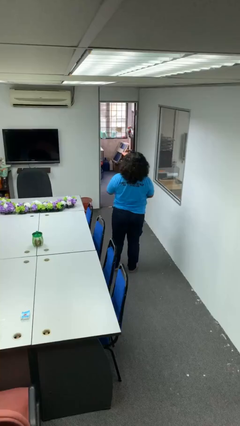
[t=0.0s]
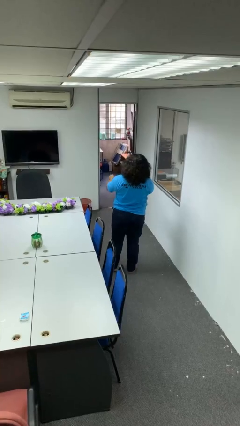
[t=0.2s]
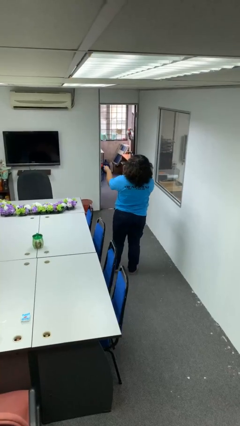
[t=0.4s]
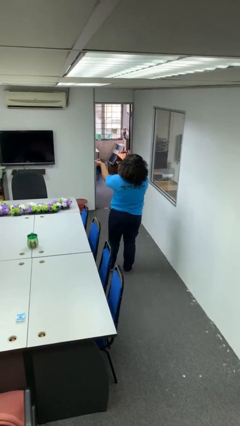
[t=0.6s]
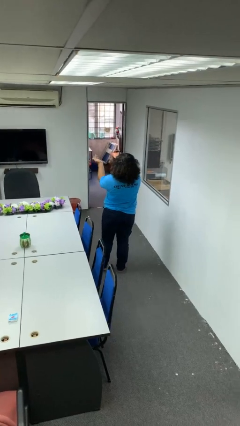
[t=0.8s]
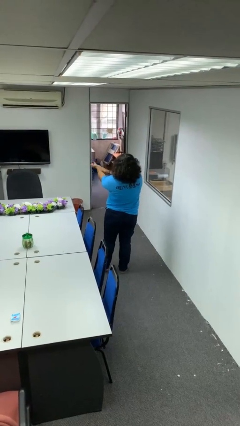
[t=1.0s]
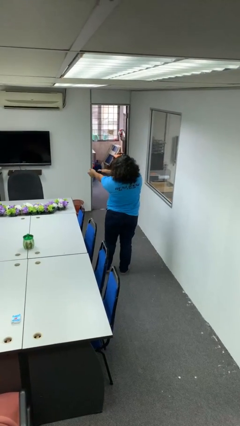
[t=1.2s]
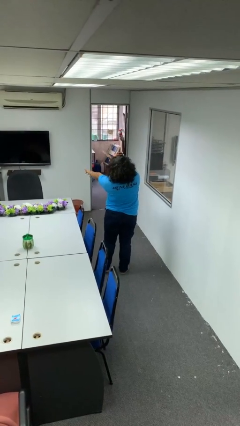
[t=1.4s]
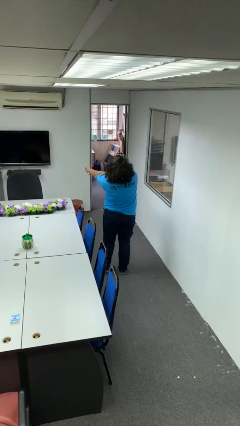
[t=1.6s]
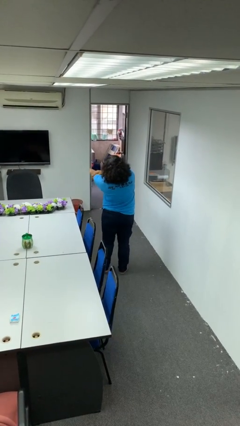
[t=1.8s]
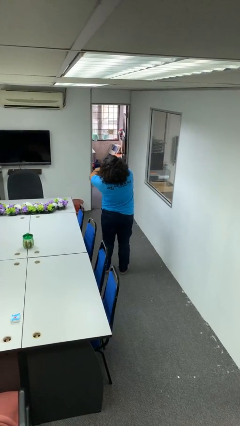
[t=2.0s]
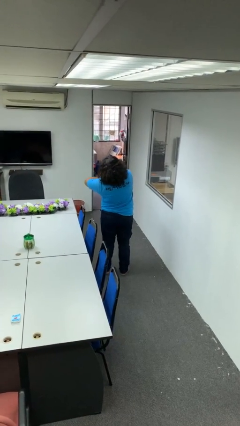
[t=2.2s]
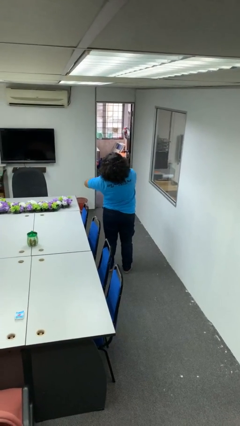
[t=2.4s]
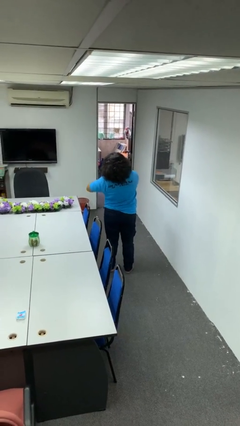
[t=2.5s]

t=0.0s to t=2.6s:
person swats bug

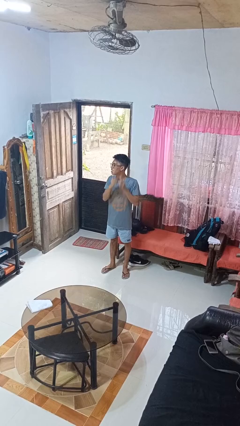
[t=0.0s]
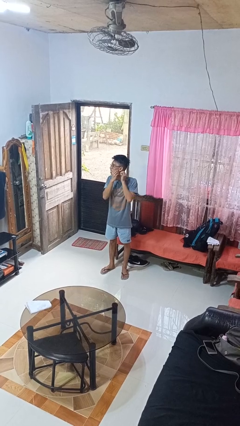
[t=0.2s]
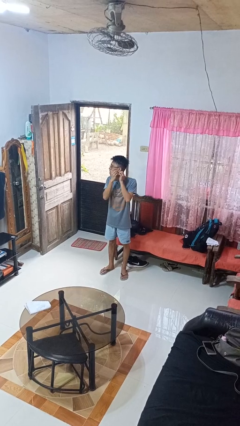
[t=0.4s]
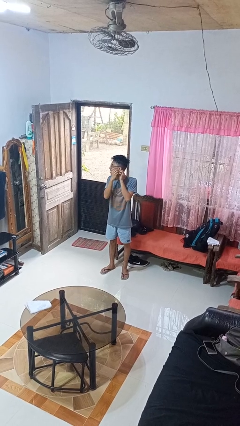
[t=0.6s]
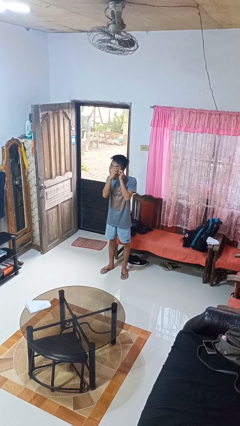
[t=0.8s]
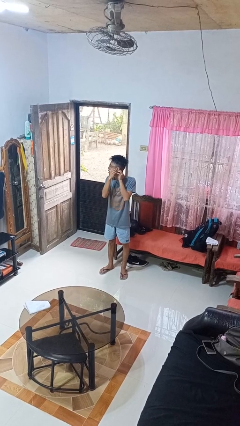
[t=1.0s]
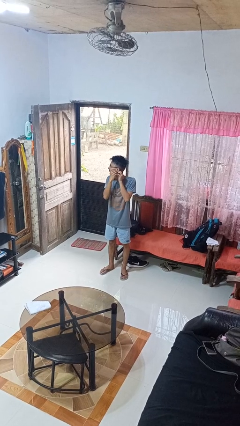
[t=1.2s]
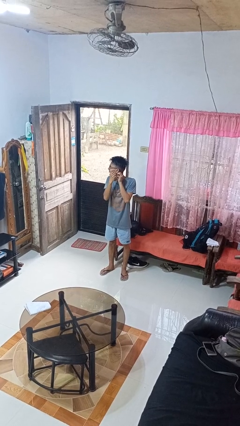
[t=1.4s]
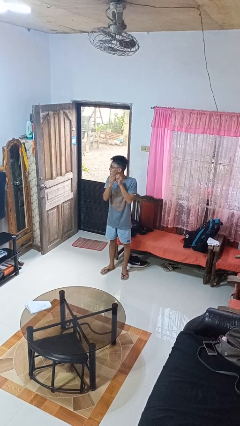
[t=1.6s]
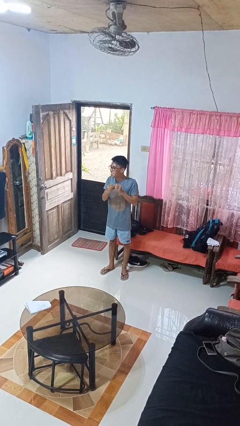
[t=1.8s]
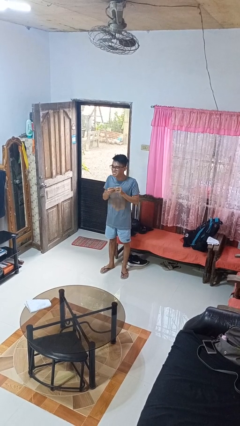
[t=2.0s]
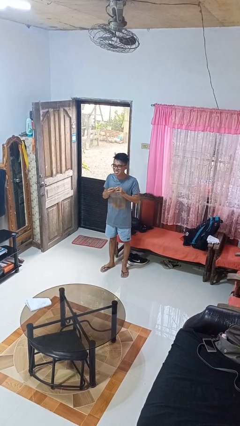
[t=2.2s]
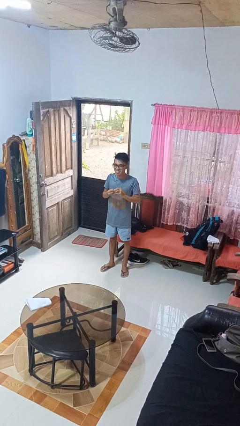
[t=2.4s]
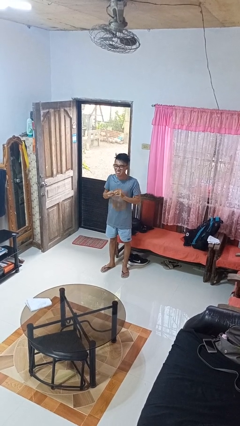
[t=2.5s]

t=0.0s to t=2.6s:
person takes off earrings

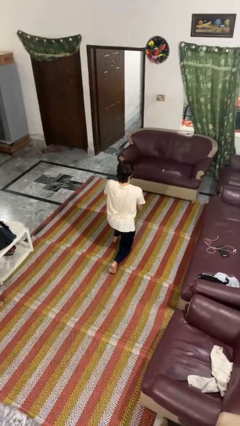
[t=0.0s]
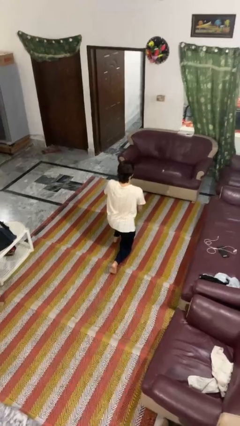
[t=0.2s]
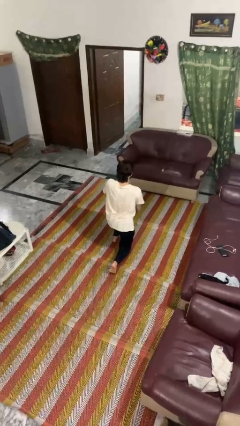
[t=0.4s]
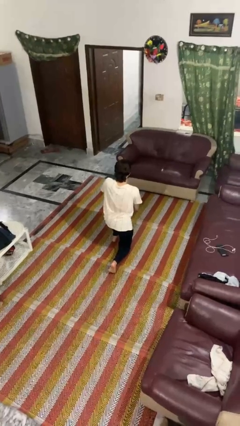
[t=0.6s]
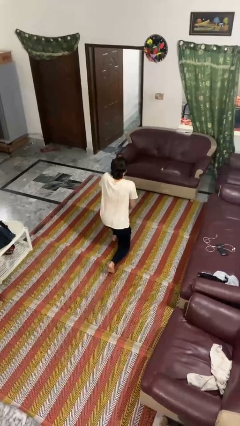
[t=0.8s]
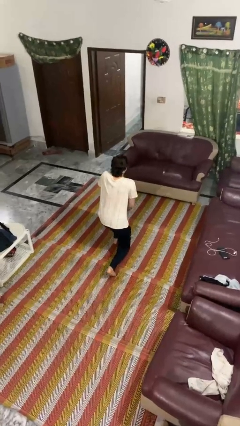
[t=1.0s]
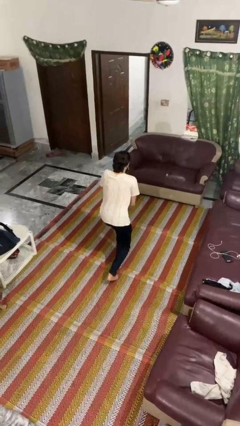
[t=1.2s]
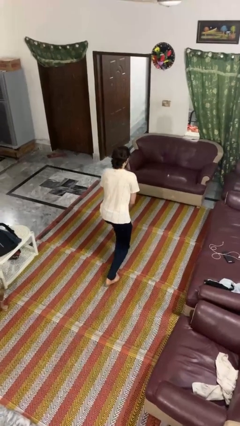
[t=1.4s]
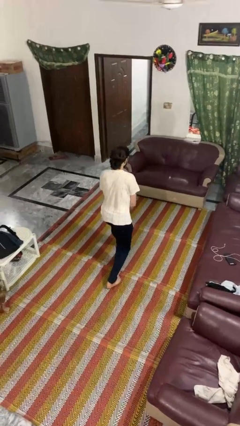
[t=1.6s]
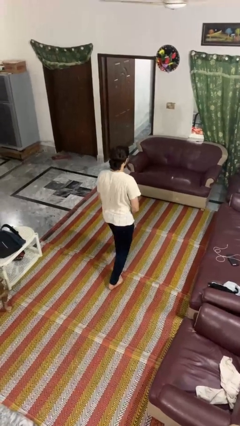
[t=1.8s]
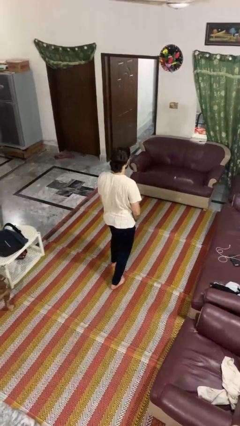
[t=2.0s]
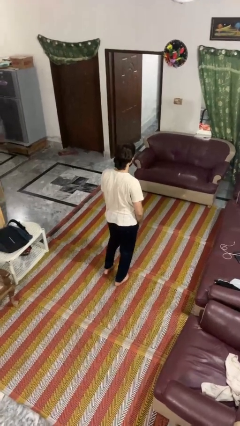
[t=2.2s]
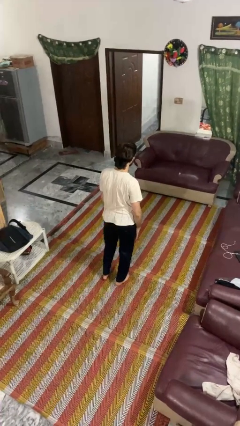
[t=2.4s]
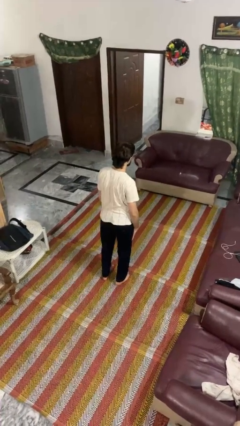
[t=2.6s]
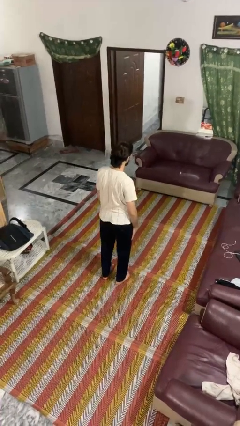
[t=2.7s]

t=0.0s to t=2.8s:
person stands up from floor

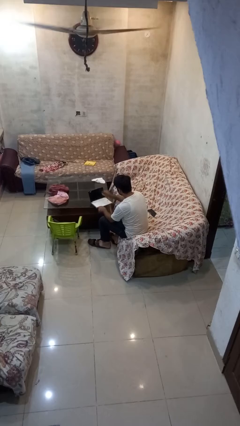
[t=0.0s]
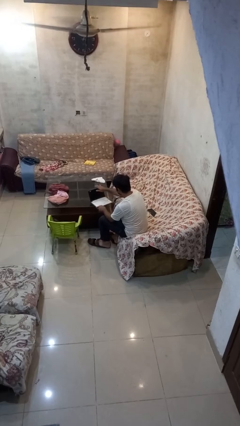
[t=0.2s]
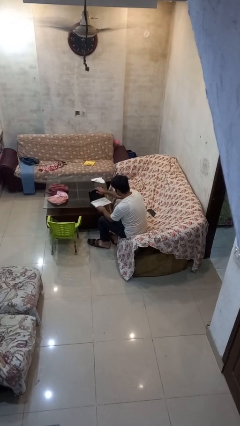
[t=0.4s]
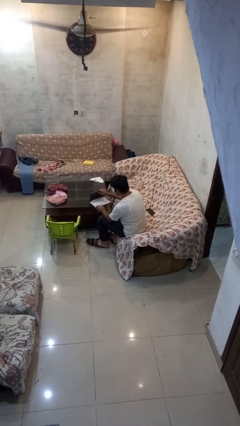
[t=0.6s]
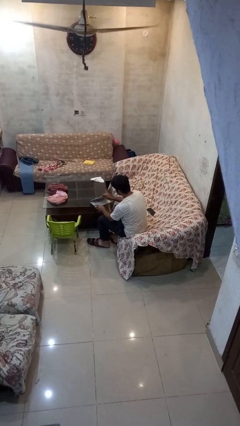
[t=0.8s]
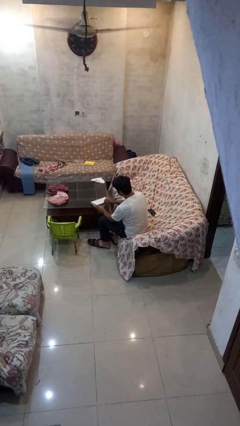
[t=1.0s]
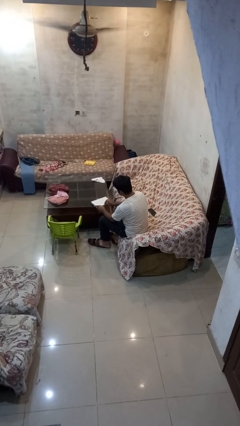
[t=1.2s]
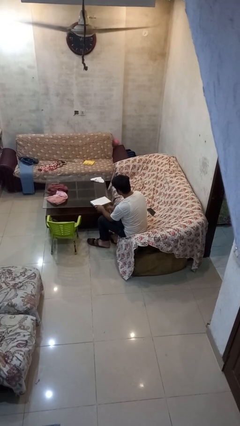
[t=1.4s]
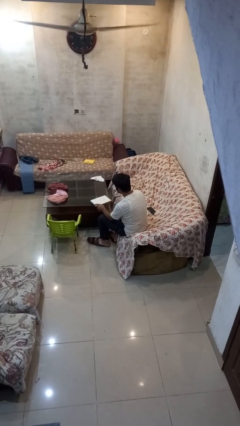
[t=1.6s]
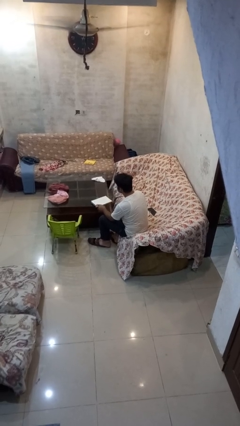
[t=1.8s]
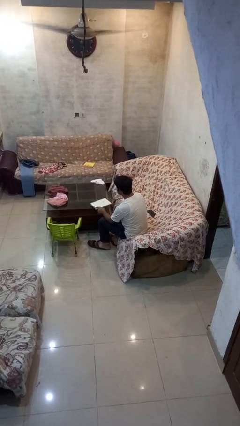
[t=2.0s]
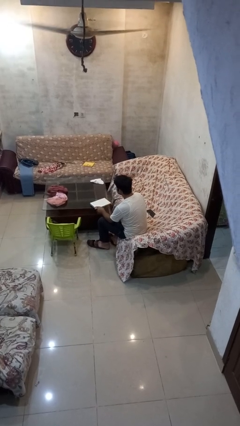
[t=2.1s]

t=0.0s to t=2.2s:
person closes laptop

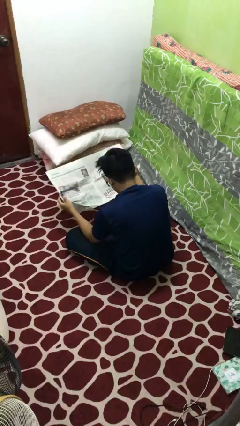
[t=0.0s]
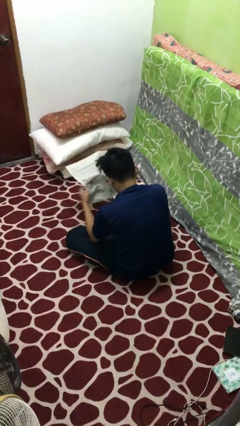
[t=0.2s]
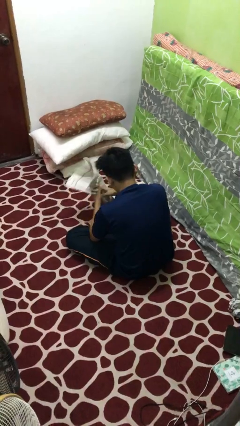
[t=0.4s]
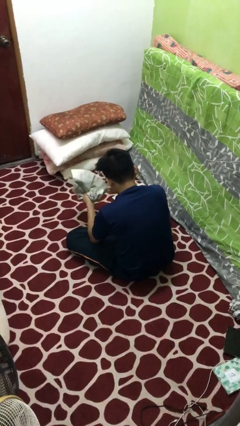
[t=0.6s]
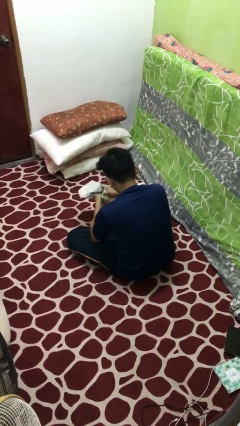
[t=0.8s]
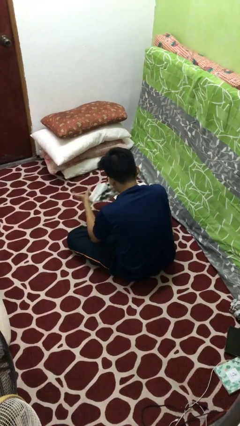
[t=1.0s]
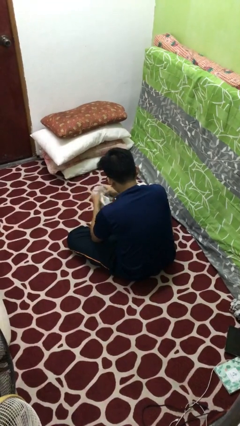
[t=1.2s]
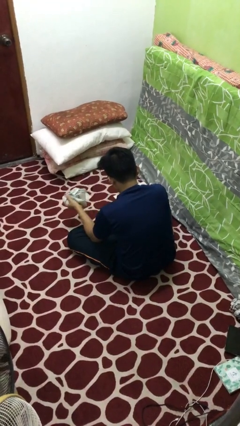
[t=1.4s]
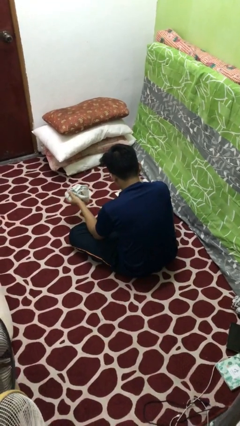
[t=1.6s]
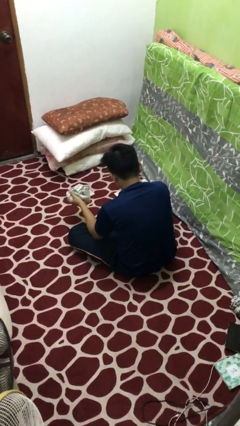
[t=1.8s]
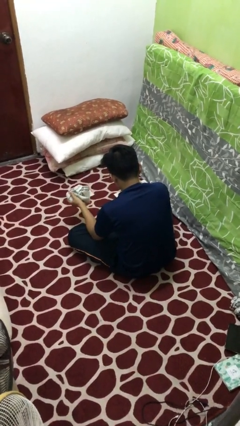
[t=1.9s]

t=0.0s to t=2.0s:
person crumples paper

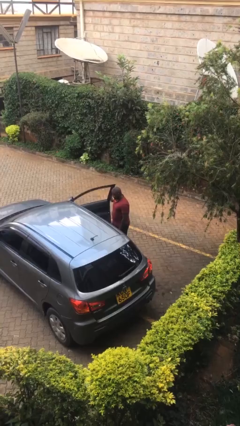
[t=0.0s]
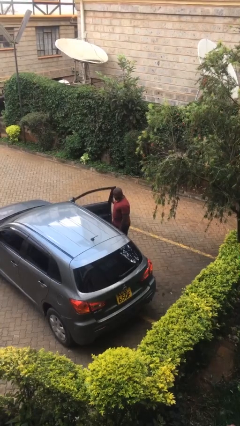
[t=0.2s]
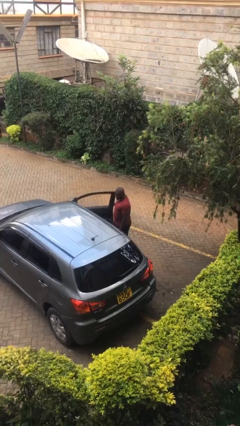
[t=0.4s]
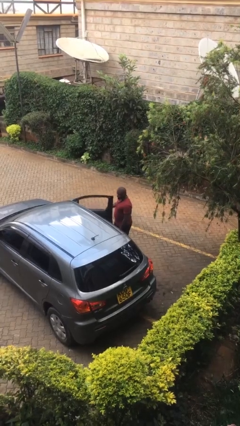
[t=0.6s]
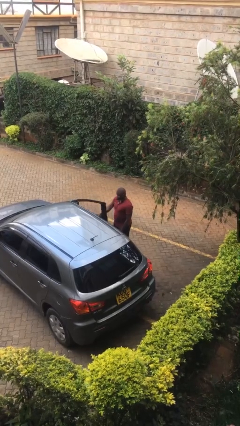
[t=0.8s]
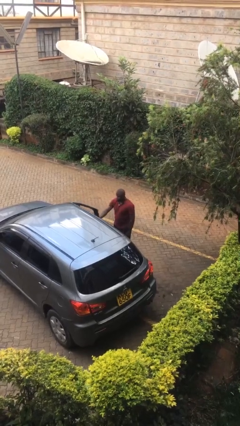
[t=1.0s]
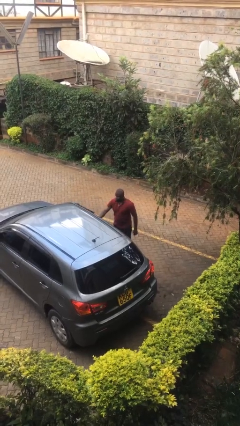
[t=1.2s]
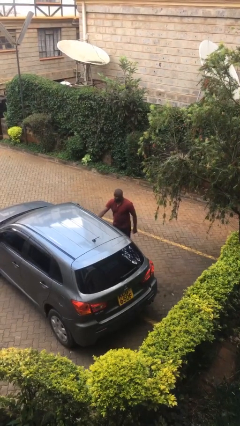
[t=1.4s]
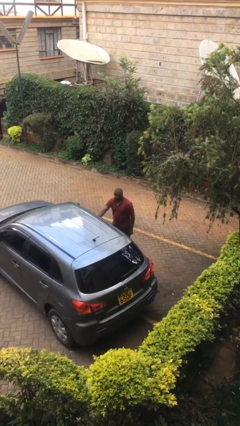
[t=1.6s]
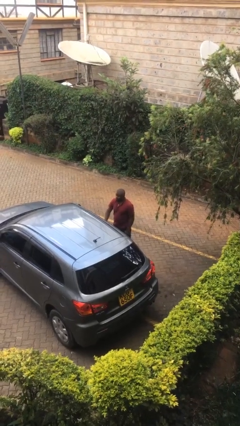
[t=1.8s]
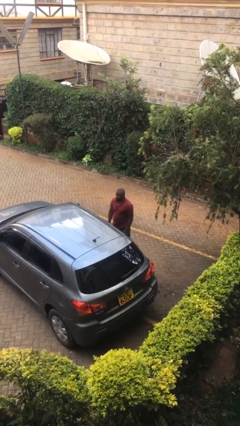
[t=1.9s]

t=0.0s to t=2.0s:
person closes car door

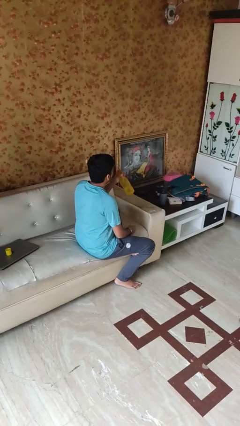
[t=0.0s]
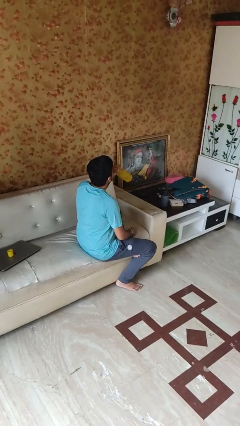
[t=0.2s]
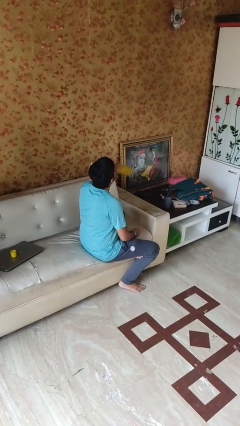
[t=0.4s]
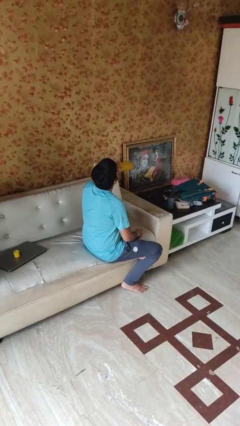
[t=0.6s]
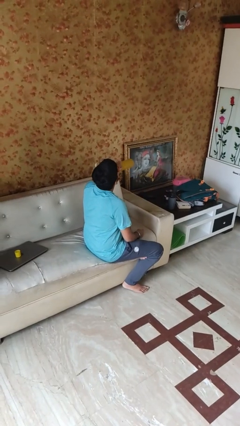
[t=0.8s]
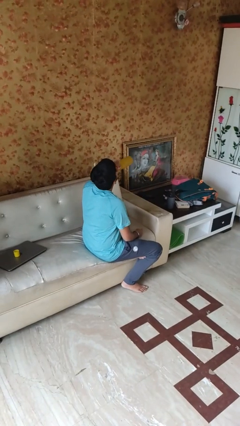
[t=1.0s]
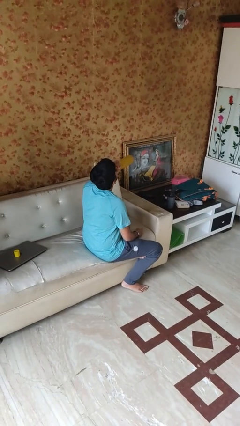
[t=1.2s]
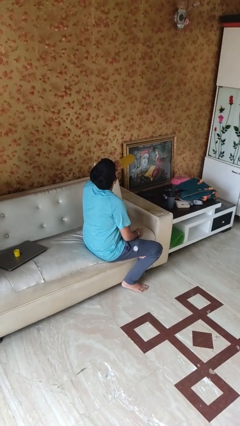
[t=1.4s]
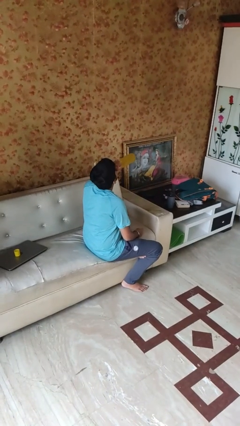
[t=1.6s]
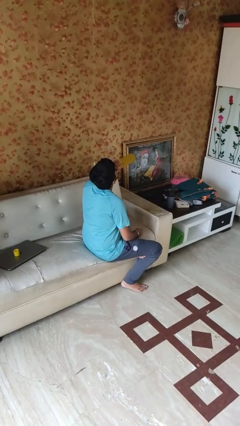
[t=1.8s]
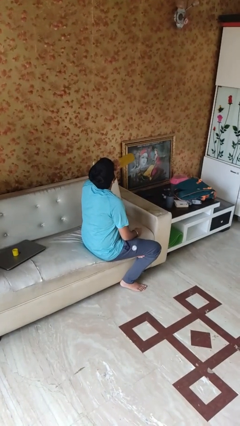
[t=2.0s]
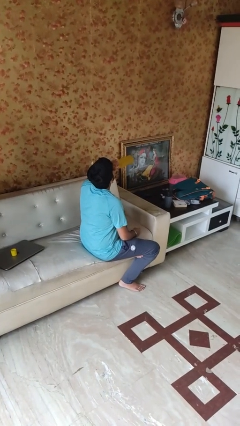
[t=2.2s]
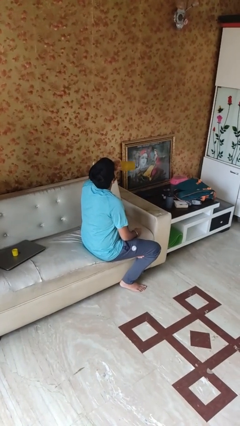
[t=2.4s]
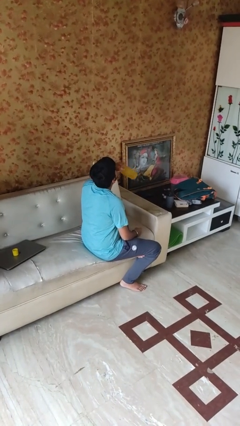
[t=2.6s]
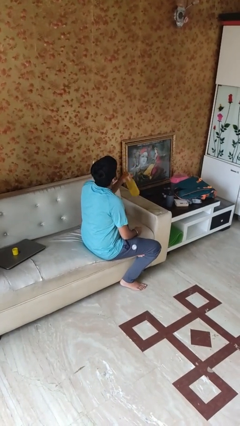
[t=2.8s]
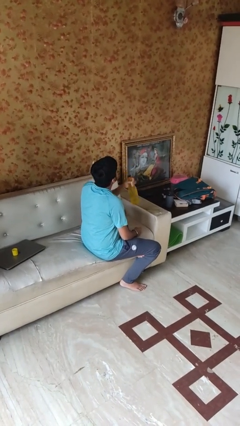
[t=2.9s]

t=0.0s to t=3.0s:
person drinks from bottle
